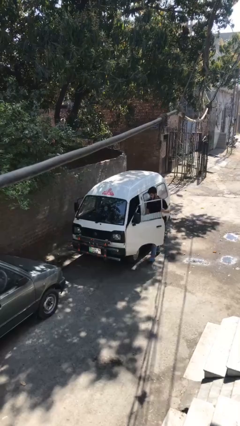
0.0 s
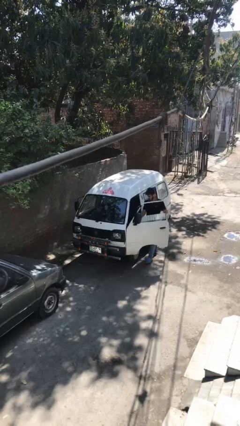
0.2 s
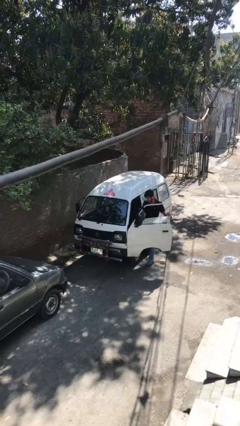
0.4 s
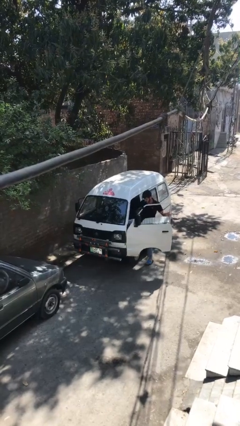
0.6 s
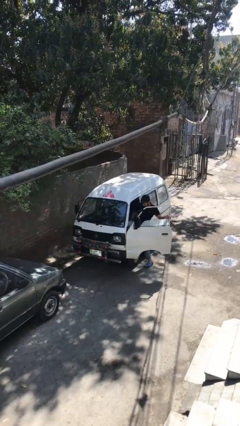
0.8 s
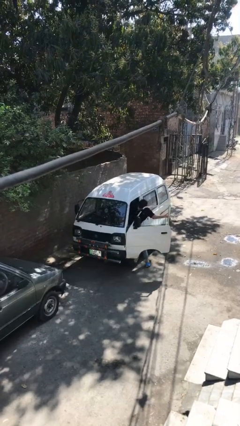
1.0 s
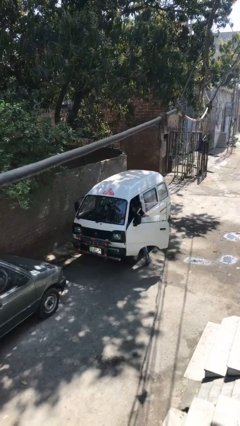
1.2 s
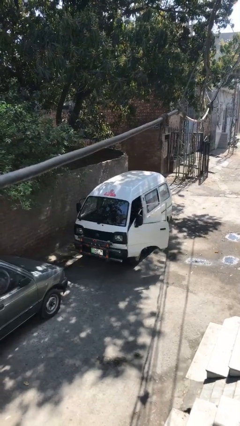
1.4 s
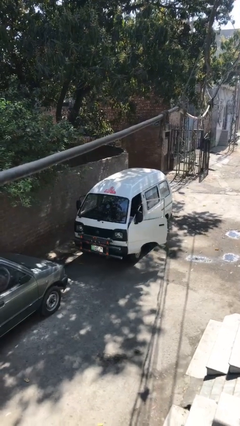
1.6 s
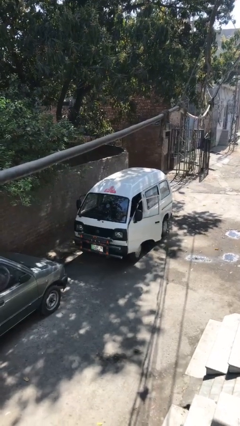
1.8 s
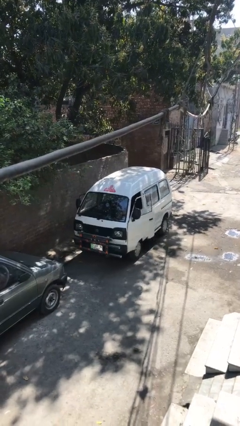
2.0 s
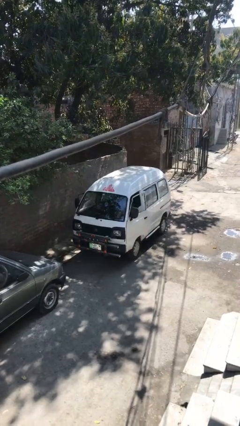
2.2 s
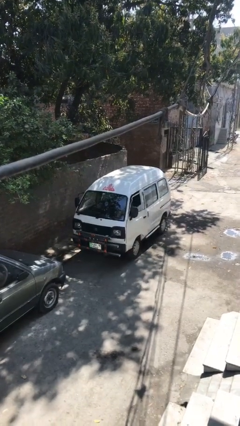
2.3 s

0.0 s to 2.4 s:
car picks up person

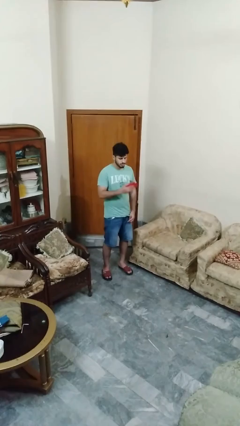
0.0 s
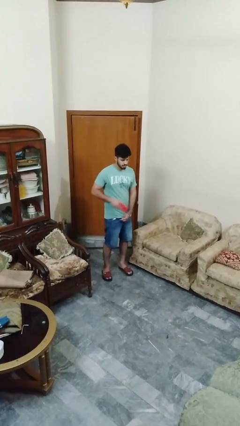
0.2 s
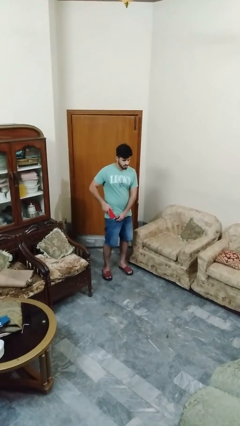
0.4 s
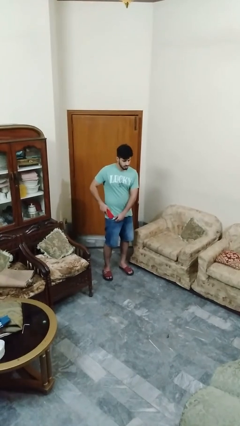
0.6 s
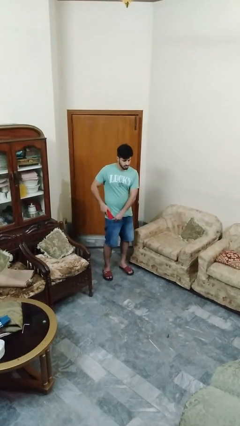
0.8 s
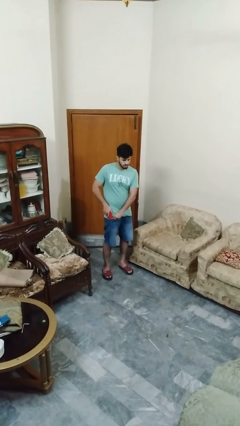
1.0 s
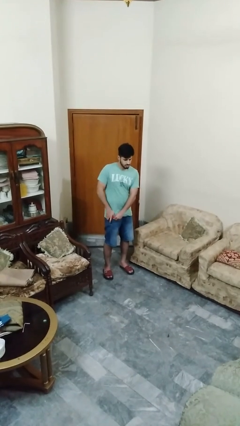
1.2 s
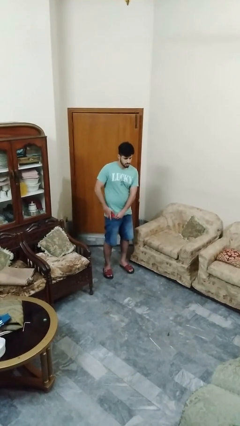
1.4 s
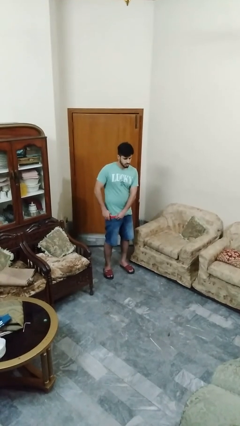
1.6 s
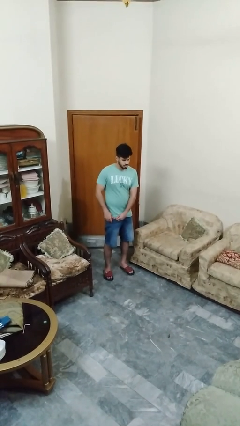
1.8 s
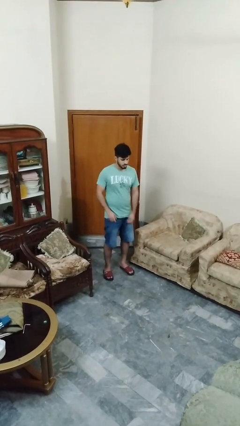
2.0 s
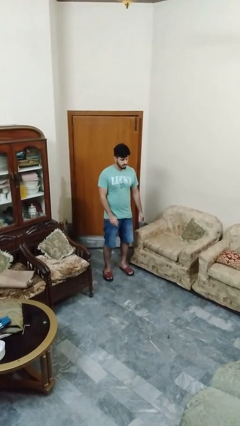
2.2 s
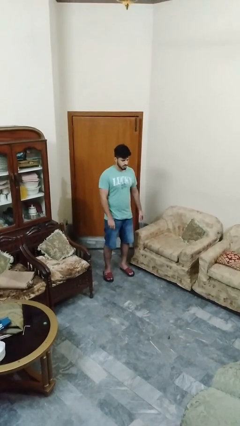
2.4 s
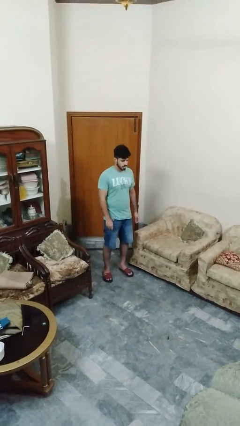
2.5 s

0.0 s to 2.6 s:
person puts phone into pocket

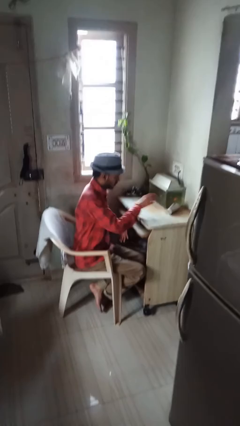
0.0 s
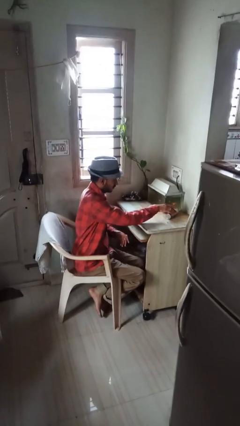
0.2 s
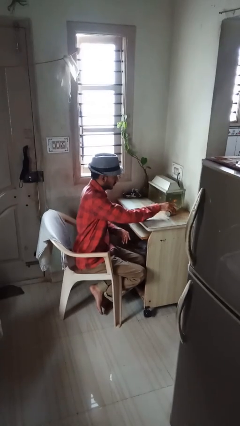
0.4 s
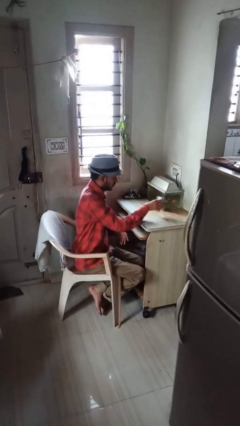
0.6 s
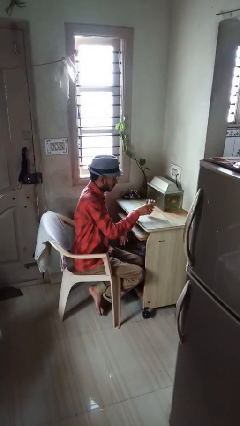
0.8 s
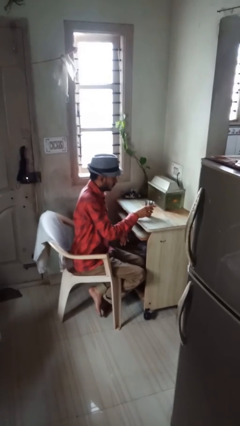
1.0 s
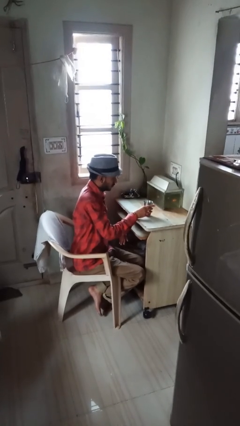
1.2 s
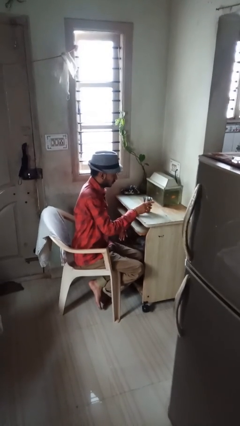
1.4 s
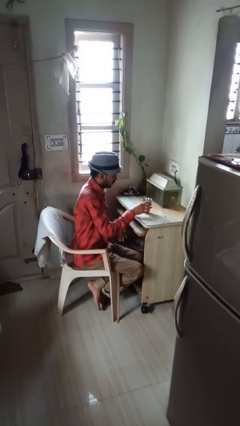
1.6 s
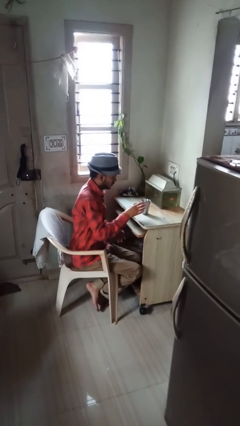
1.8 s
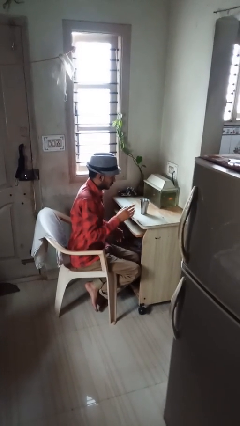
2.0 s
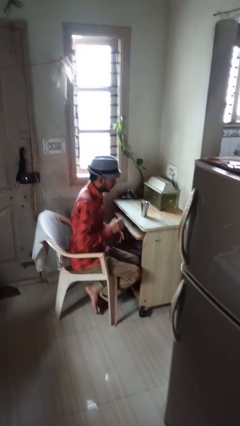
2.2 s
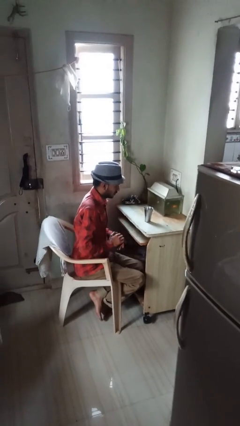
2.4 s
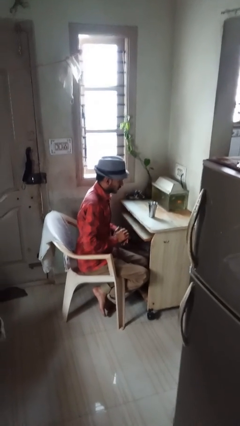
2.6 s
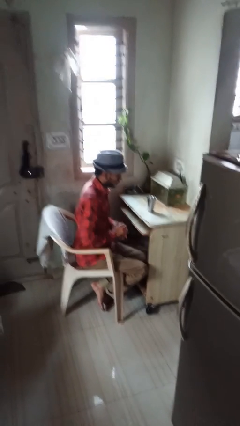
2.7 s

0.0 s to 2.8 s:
person sets upright glass

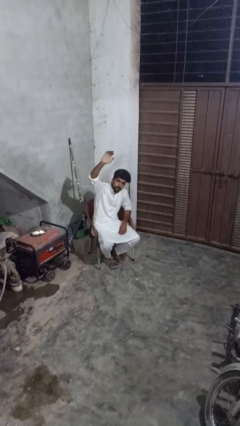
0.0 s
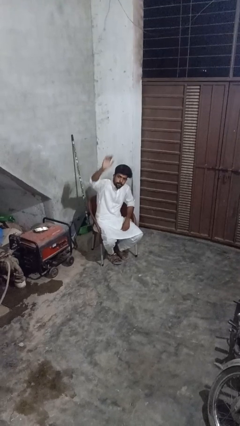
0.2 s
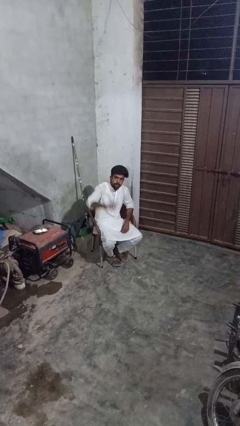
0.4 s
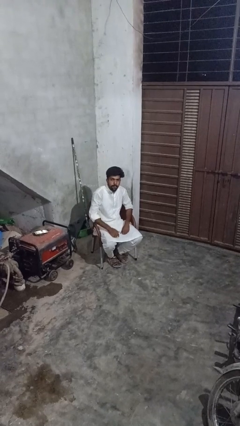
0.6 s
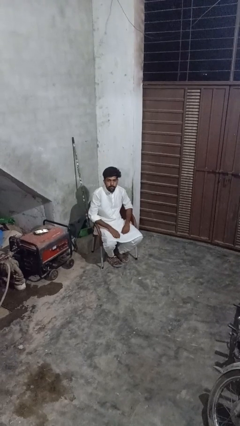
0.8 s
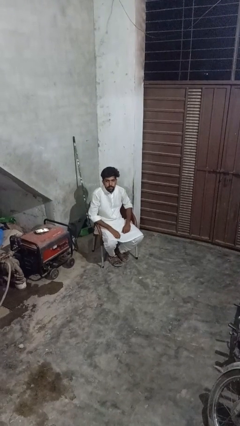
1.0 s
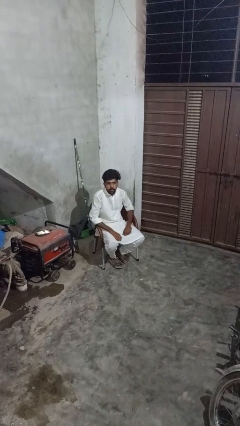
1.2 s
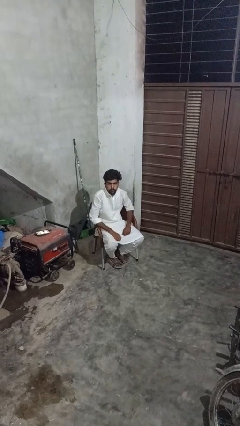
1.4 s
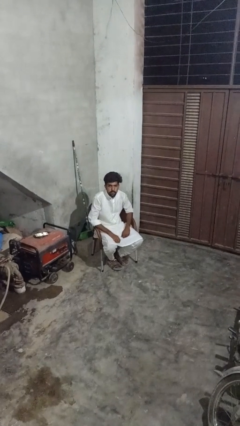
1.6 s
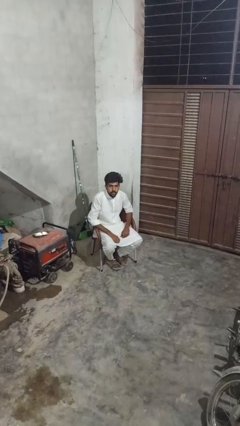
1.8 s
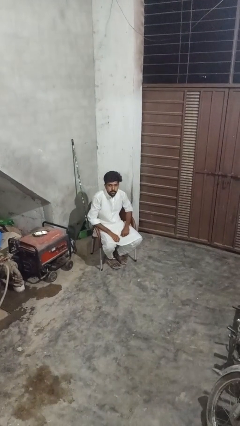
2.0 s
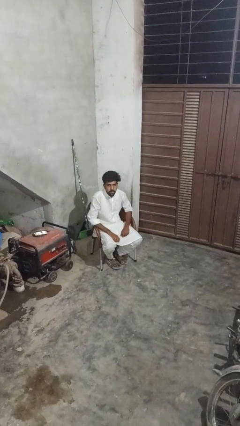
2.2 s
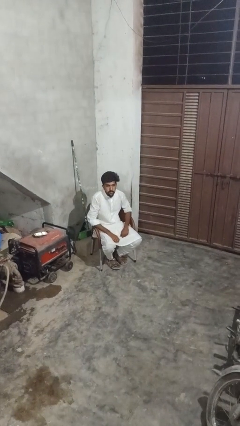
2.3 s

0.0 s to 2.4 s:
person gestures lower hand

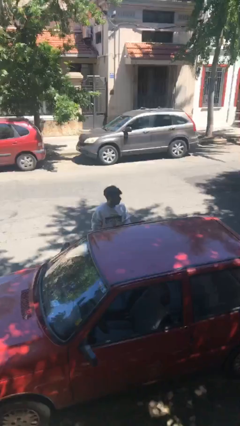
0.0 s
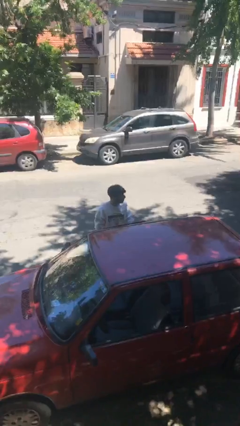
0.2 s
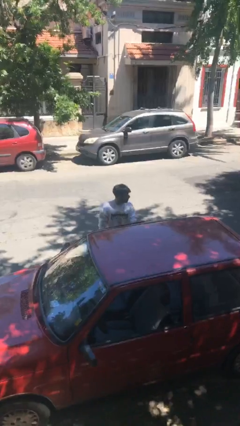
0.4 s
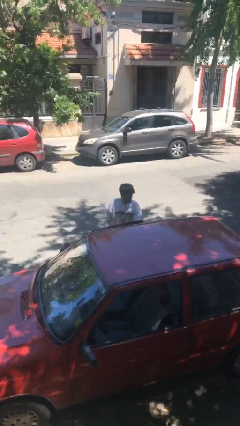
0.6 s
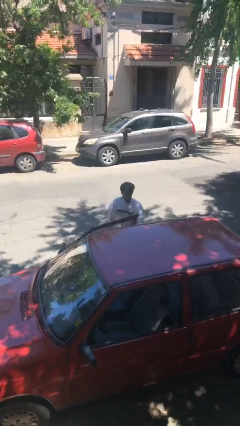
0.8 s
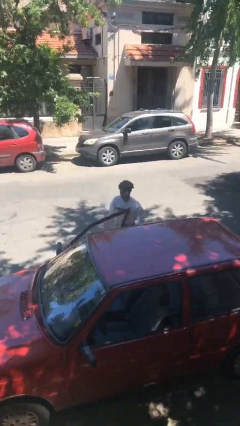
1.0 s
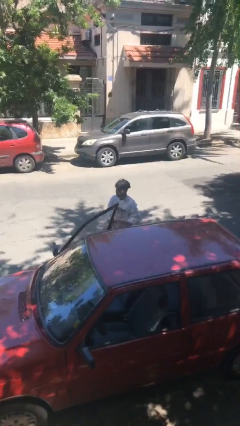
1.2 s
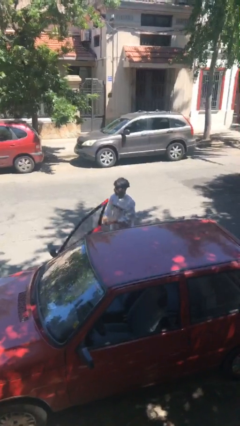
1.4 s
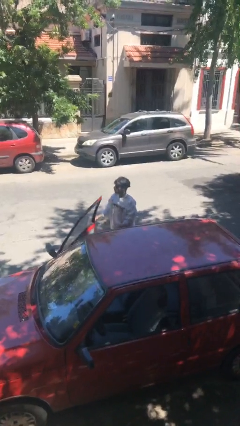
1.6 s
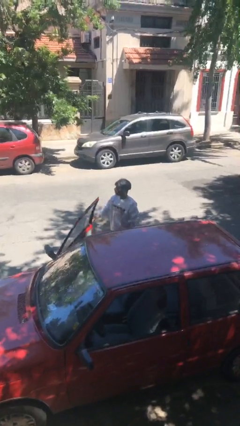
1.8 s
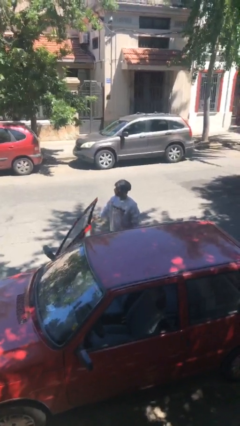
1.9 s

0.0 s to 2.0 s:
person opens car door

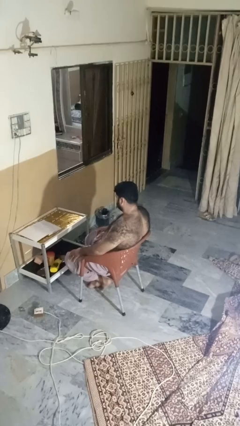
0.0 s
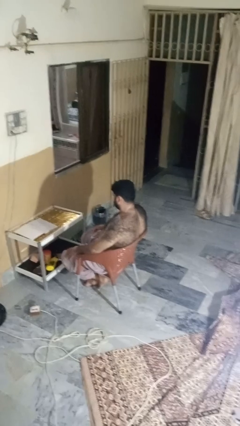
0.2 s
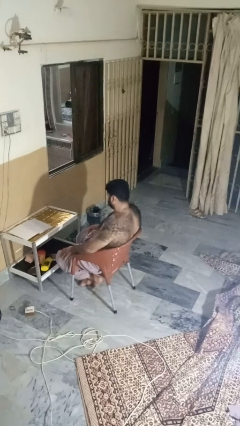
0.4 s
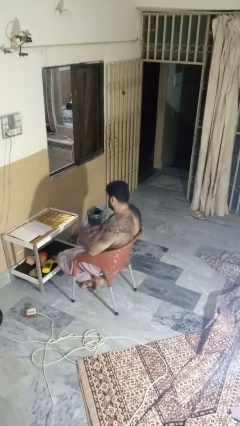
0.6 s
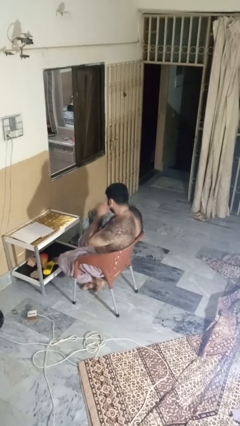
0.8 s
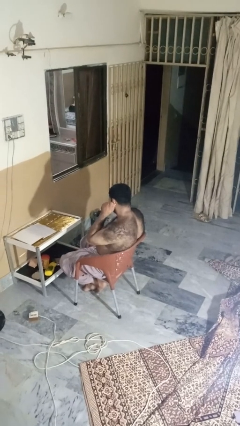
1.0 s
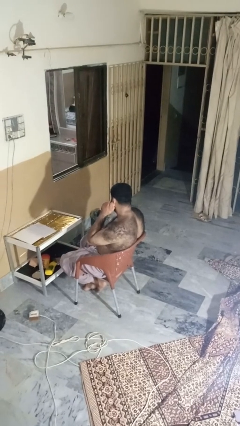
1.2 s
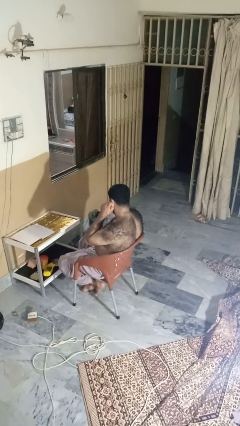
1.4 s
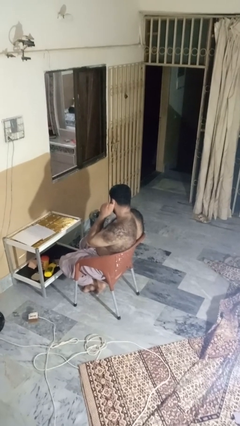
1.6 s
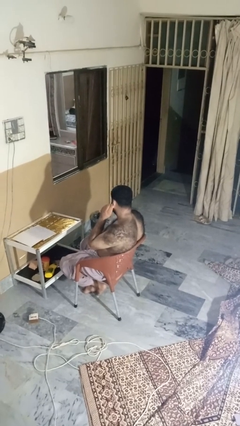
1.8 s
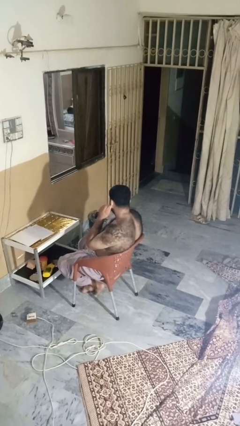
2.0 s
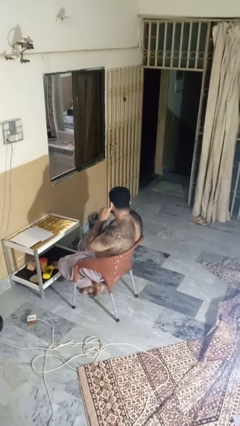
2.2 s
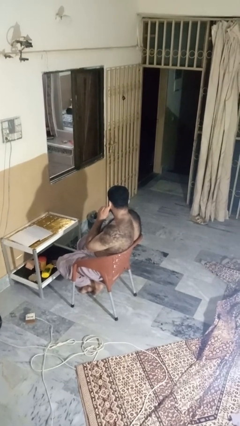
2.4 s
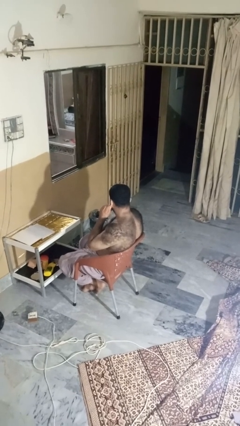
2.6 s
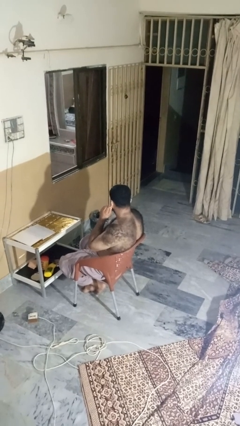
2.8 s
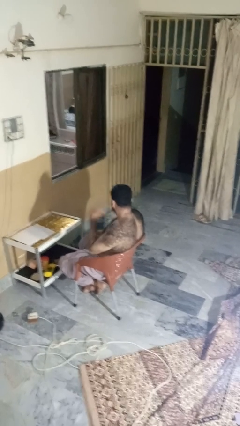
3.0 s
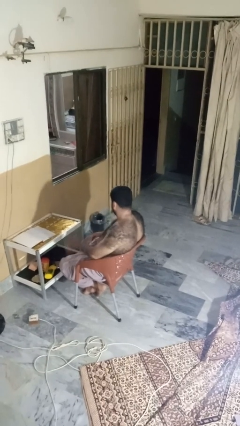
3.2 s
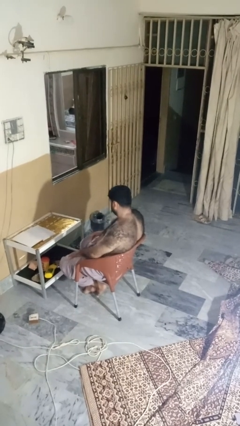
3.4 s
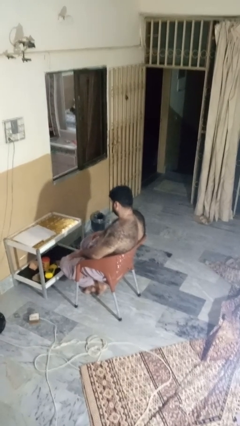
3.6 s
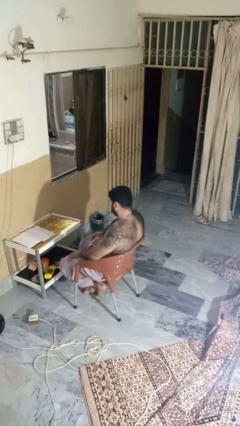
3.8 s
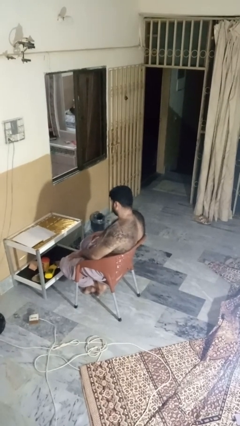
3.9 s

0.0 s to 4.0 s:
person touches earlobe

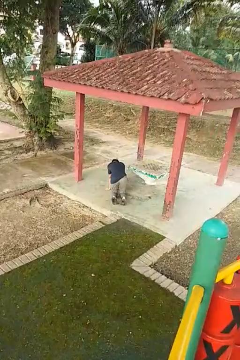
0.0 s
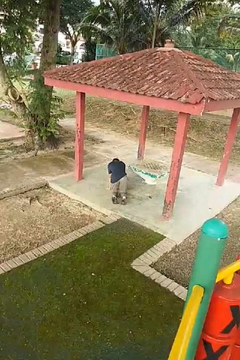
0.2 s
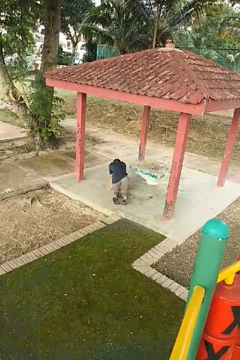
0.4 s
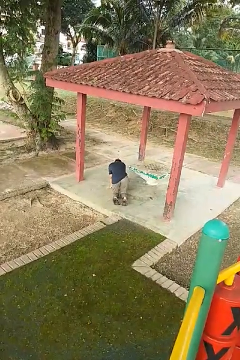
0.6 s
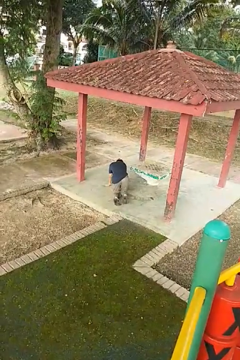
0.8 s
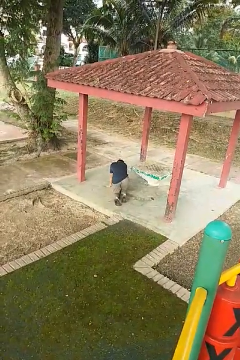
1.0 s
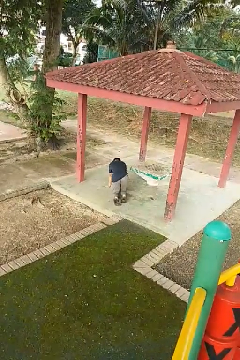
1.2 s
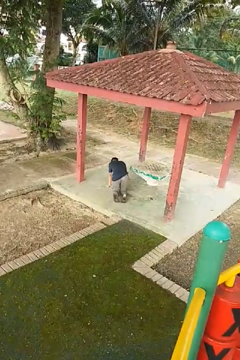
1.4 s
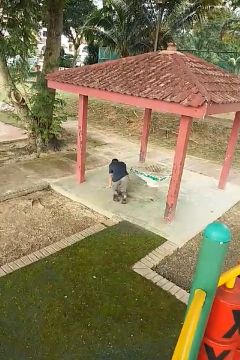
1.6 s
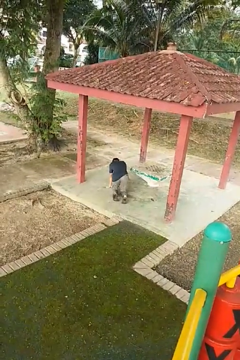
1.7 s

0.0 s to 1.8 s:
person crawls
